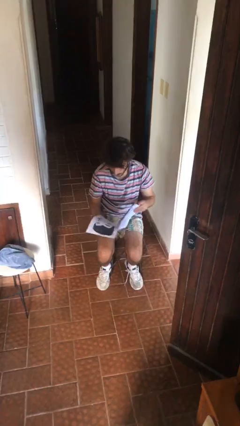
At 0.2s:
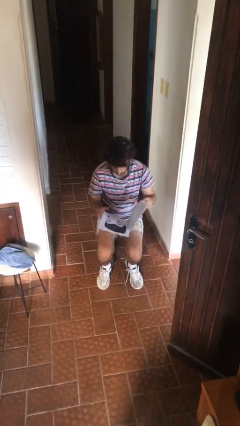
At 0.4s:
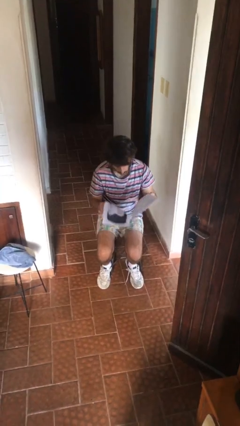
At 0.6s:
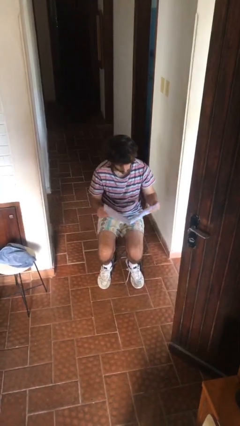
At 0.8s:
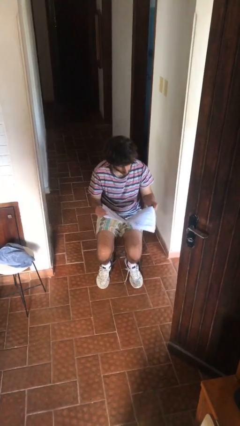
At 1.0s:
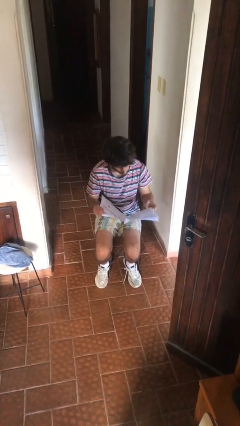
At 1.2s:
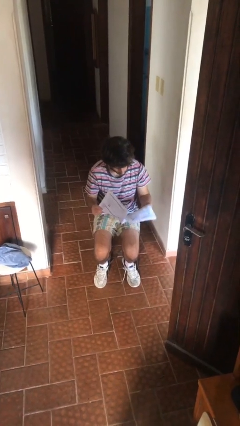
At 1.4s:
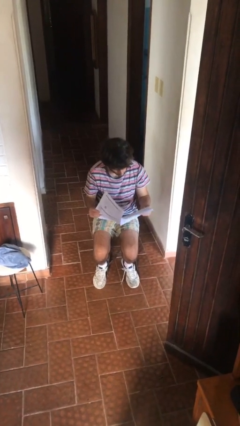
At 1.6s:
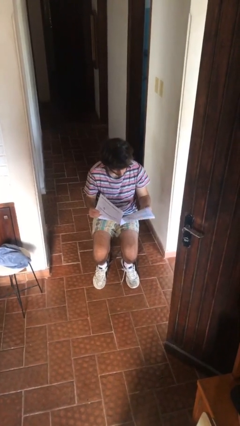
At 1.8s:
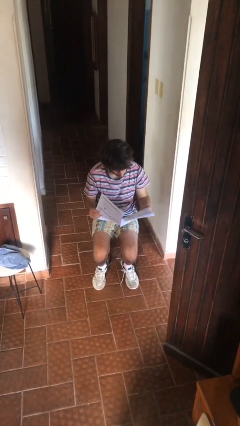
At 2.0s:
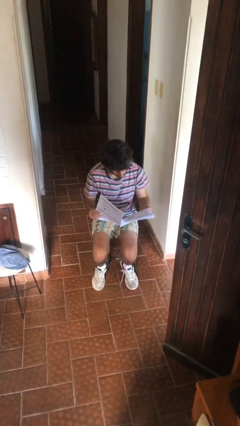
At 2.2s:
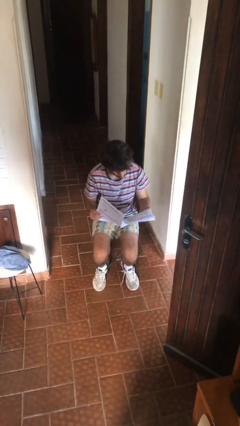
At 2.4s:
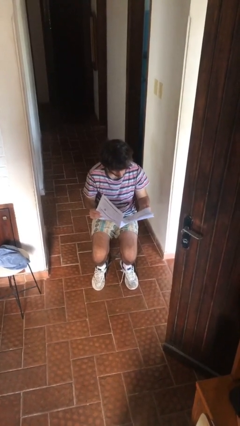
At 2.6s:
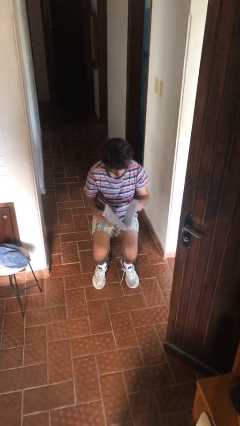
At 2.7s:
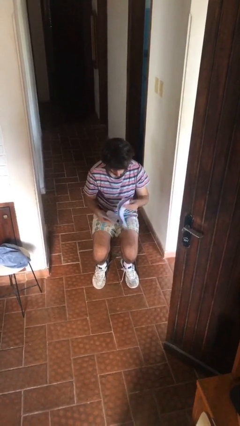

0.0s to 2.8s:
person reads document

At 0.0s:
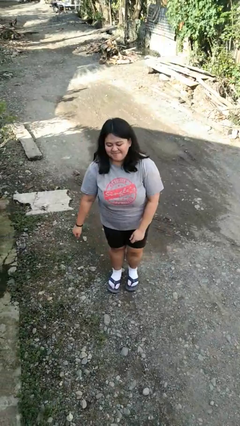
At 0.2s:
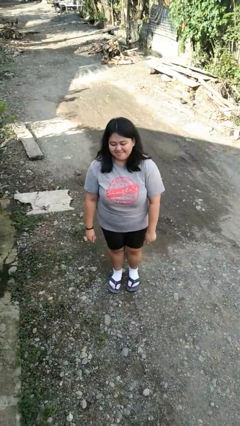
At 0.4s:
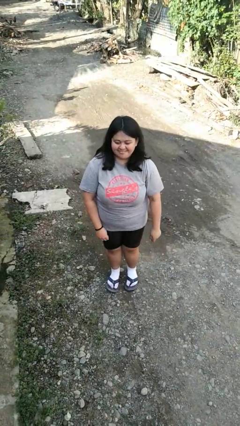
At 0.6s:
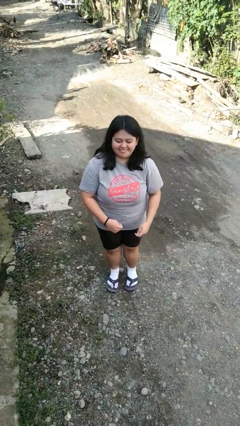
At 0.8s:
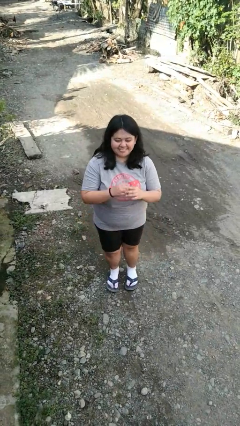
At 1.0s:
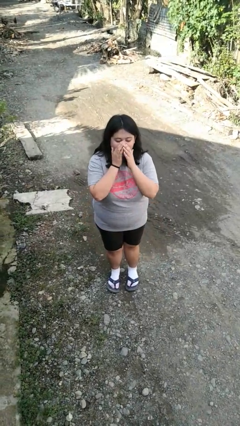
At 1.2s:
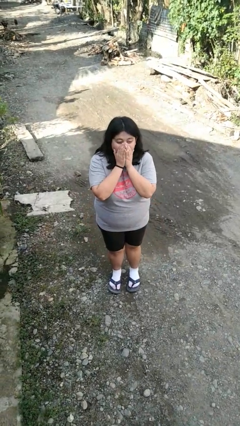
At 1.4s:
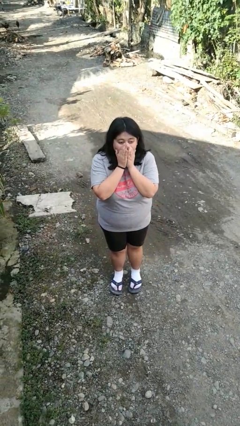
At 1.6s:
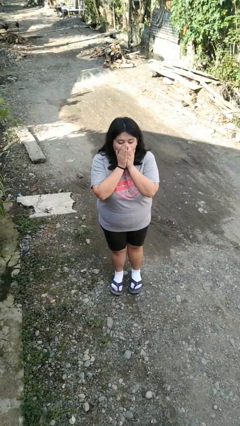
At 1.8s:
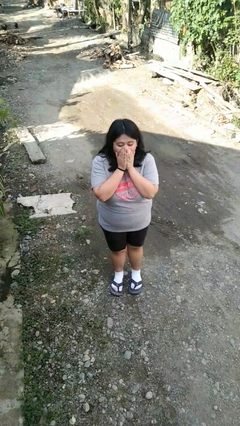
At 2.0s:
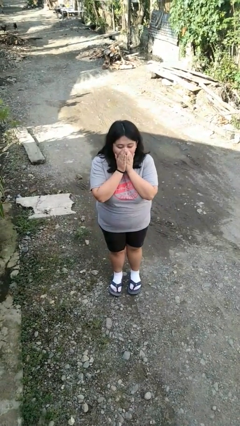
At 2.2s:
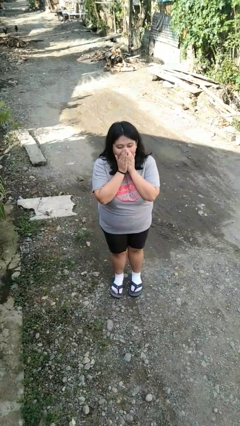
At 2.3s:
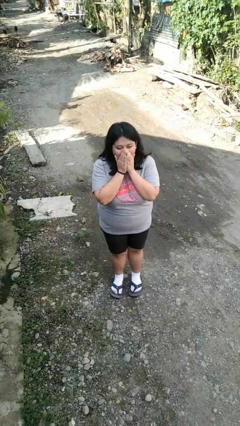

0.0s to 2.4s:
person blows into hands

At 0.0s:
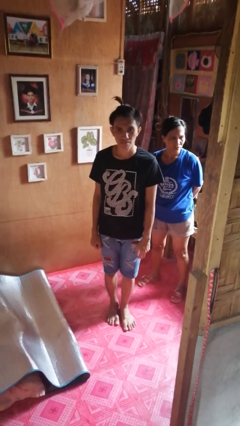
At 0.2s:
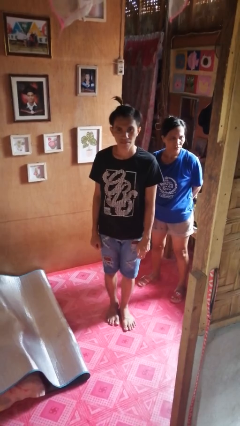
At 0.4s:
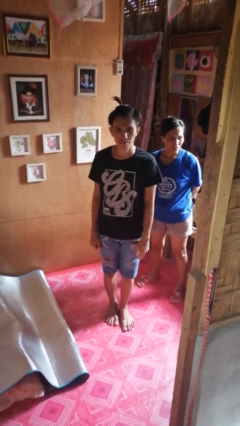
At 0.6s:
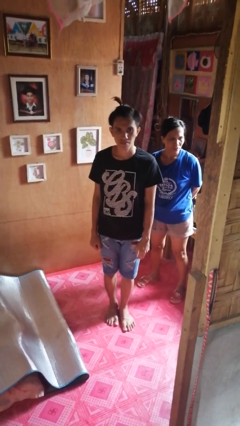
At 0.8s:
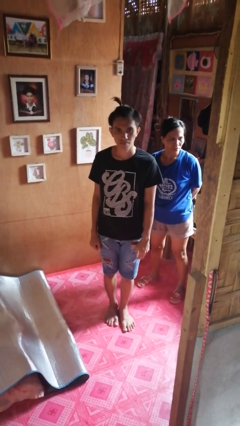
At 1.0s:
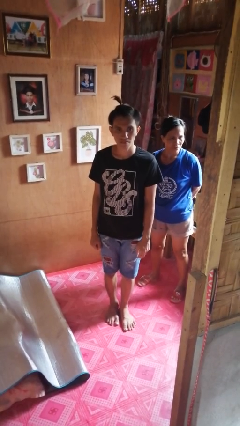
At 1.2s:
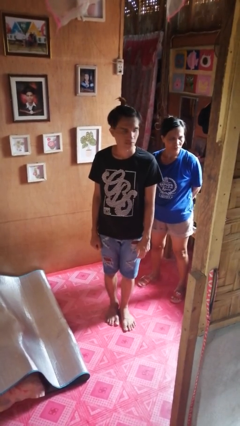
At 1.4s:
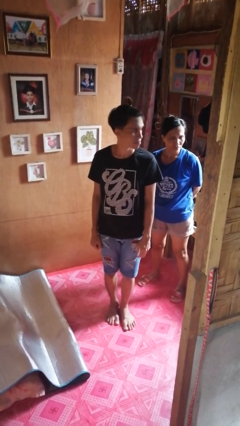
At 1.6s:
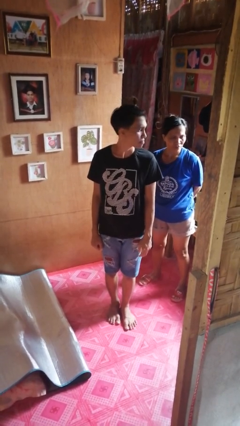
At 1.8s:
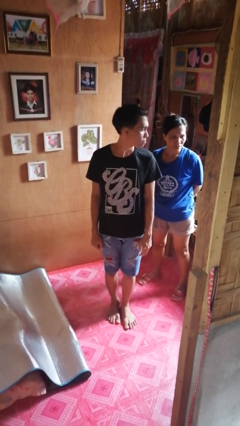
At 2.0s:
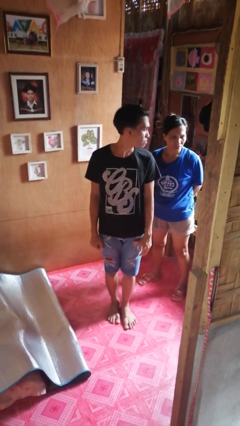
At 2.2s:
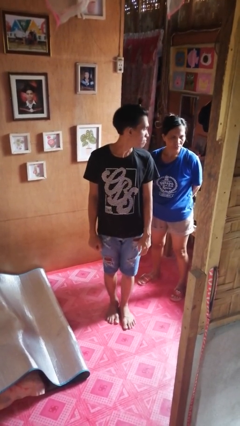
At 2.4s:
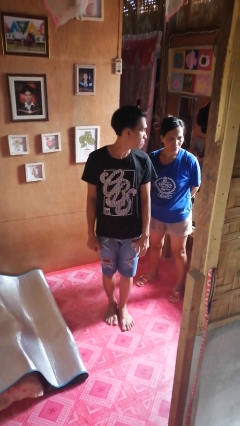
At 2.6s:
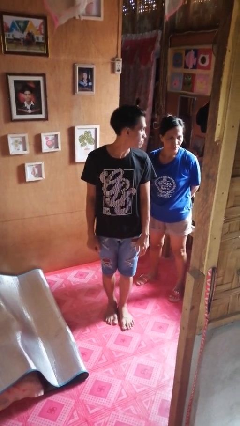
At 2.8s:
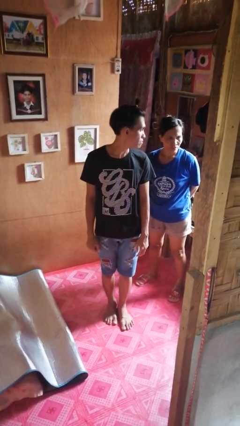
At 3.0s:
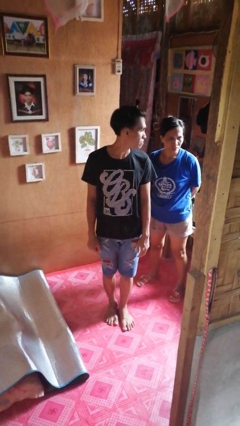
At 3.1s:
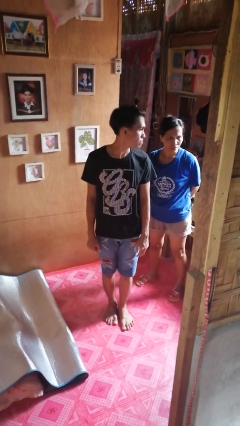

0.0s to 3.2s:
person looks over shoulder

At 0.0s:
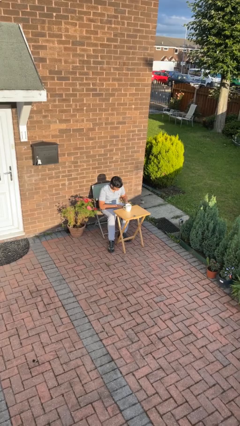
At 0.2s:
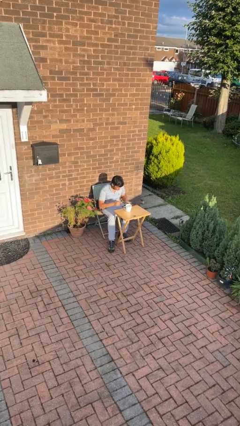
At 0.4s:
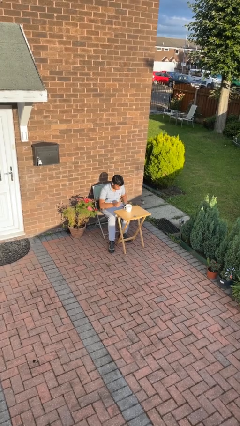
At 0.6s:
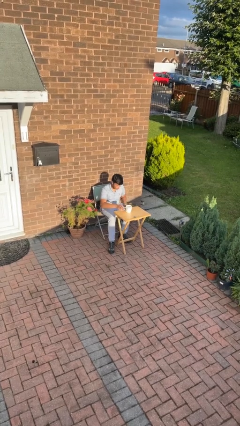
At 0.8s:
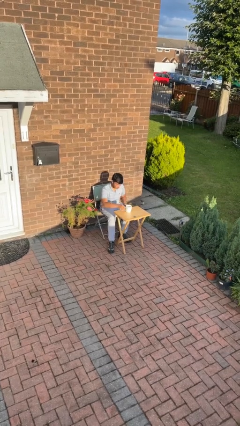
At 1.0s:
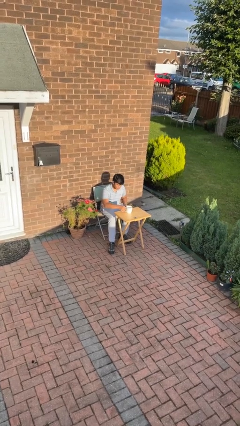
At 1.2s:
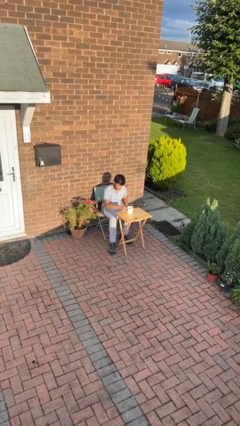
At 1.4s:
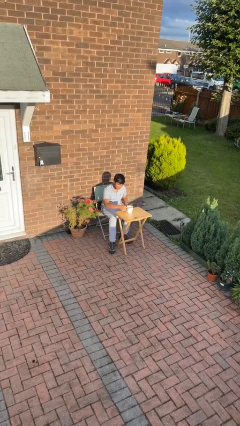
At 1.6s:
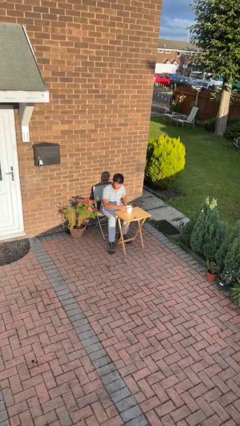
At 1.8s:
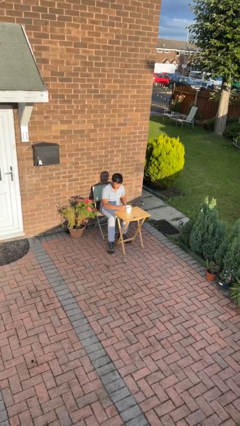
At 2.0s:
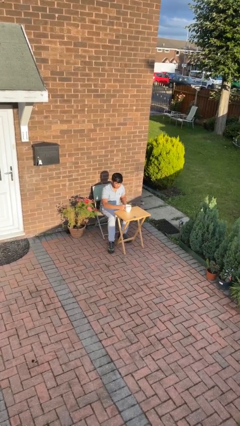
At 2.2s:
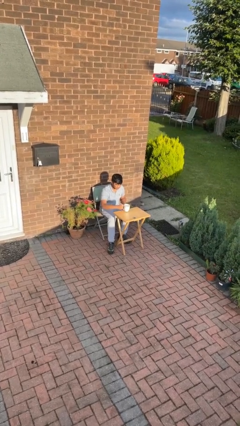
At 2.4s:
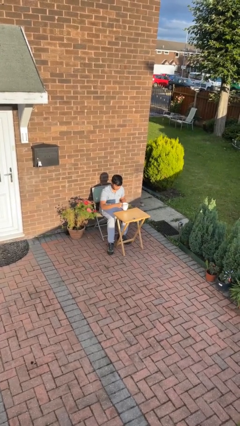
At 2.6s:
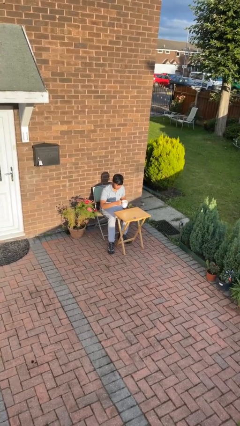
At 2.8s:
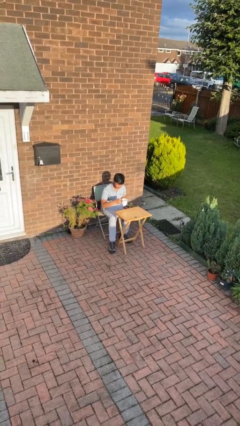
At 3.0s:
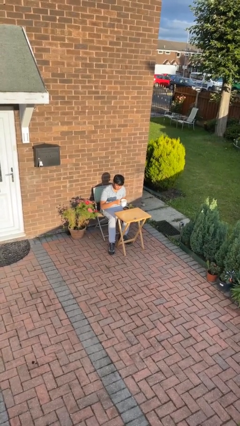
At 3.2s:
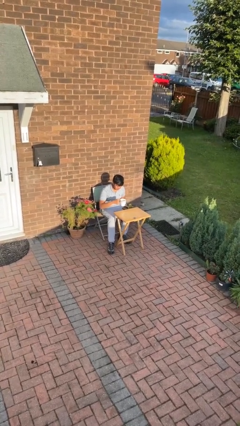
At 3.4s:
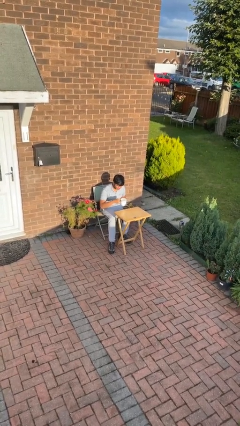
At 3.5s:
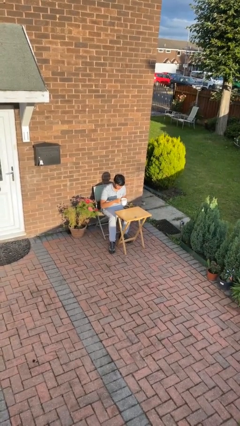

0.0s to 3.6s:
person picks up object from table

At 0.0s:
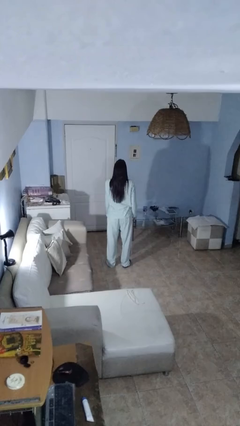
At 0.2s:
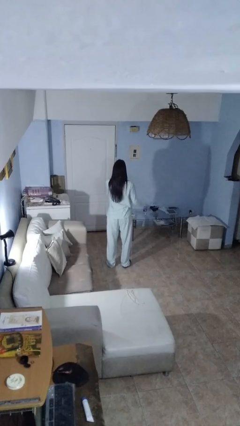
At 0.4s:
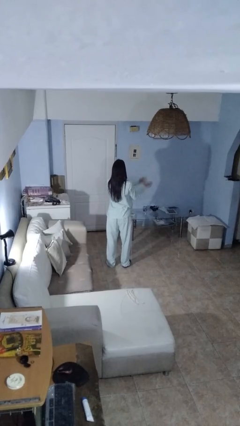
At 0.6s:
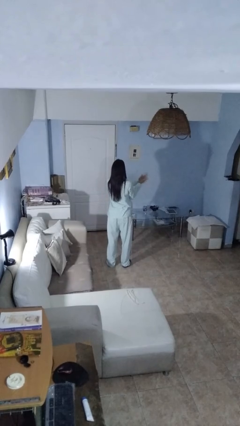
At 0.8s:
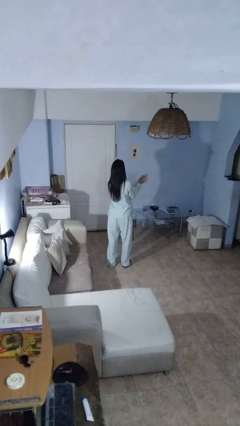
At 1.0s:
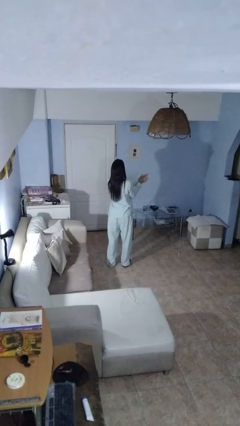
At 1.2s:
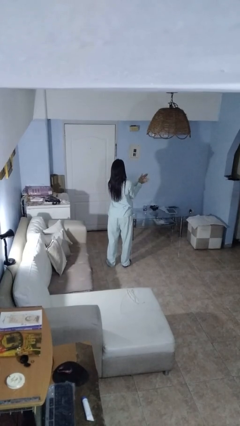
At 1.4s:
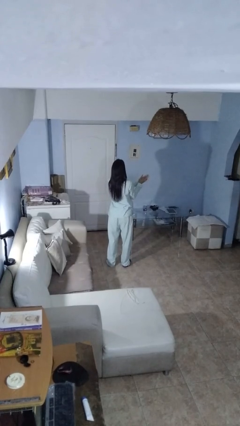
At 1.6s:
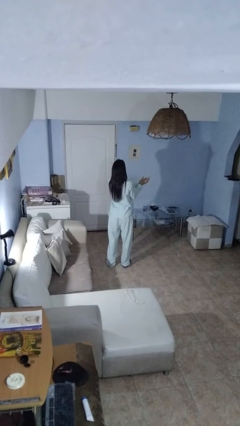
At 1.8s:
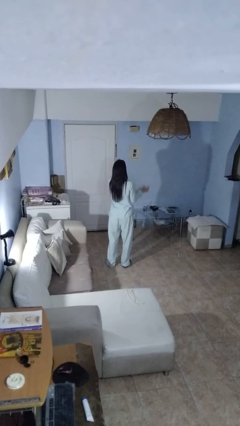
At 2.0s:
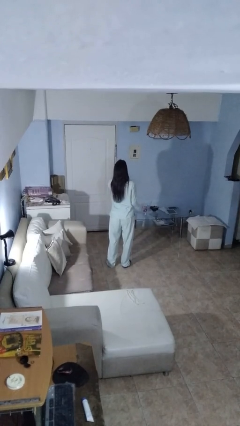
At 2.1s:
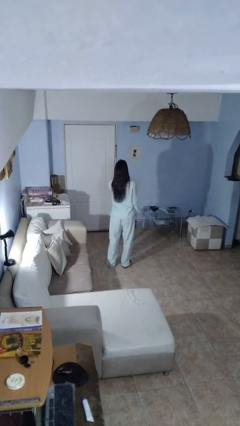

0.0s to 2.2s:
person claps hands

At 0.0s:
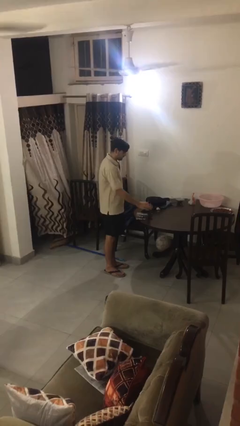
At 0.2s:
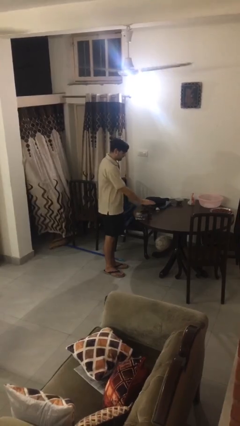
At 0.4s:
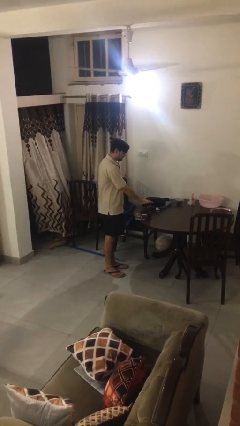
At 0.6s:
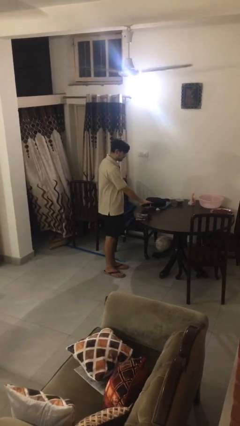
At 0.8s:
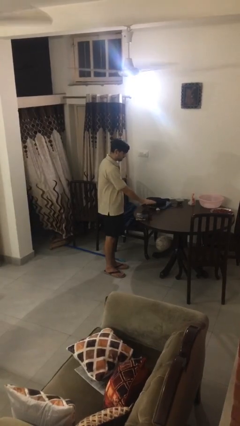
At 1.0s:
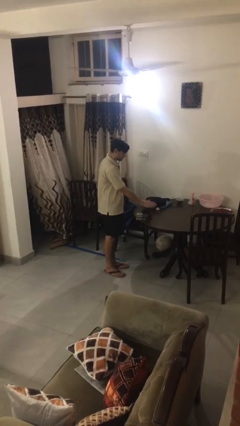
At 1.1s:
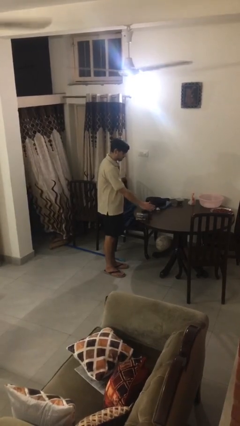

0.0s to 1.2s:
person waves hand over object

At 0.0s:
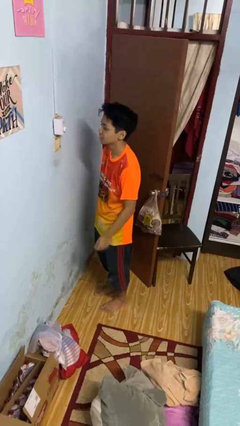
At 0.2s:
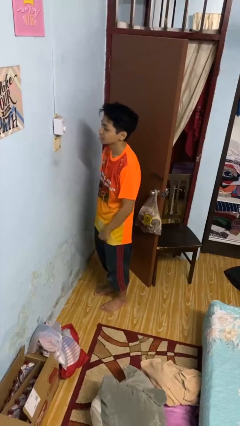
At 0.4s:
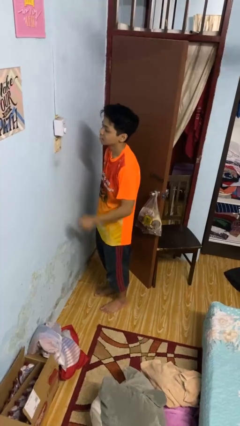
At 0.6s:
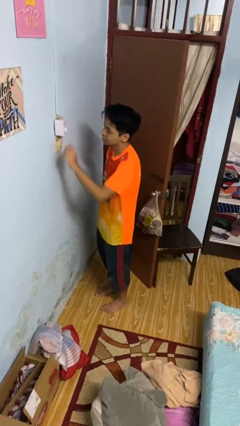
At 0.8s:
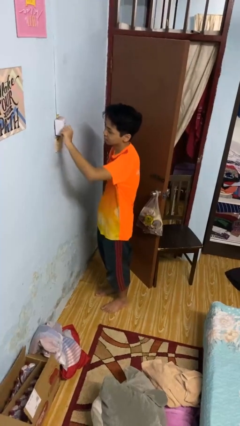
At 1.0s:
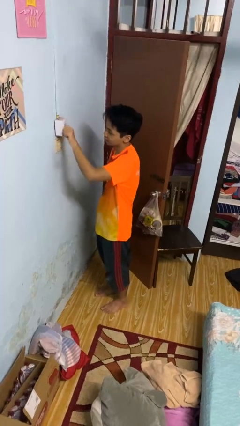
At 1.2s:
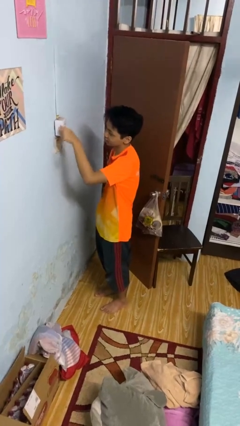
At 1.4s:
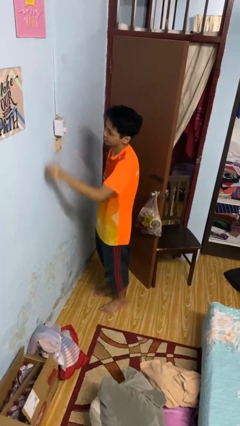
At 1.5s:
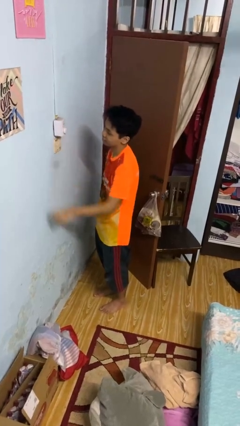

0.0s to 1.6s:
person adjusts thermostat
